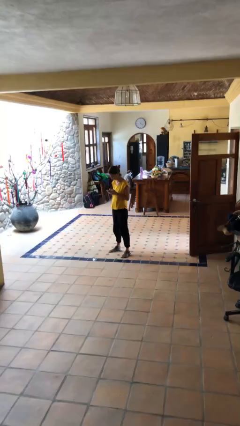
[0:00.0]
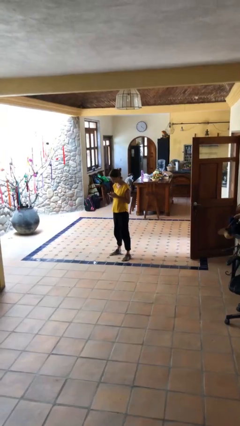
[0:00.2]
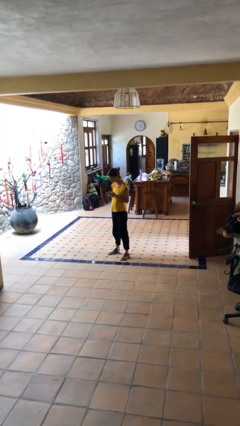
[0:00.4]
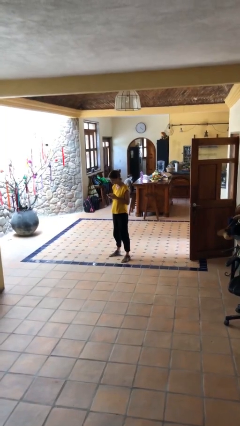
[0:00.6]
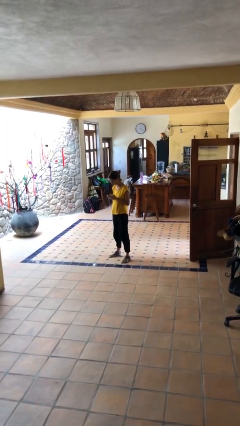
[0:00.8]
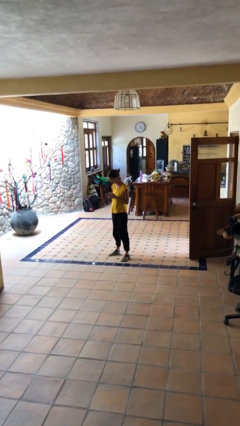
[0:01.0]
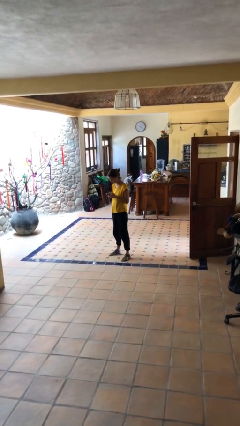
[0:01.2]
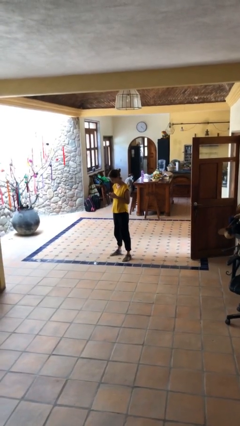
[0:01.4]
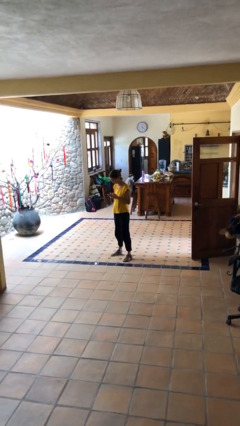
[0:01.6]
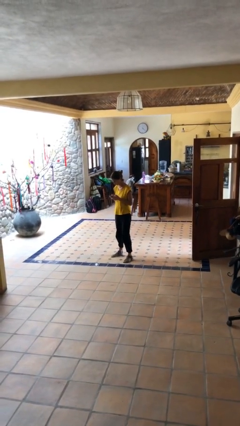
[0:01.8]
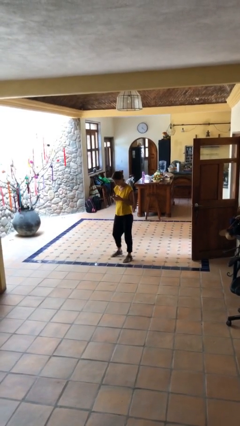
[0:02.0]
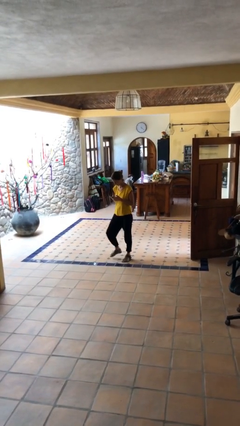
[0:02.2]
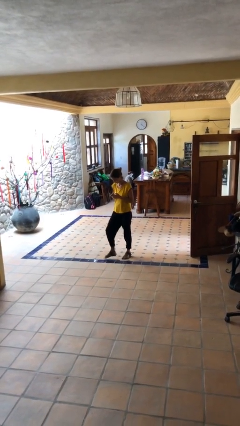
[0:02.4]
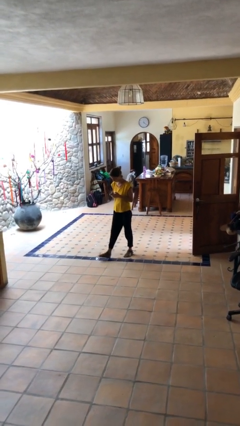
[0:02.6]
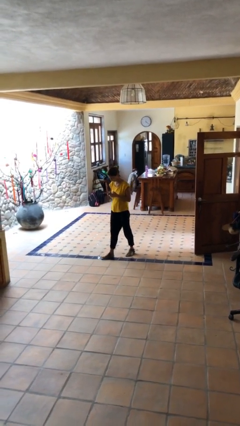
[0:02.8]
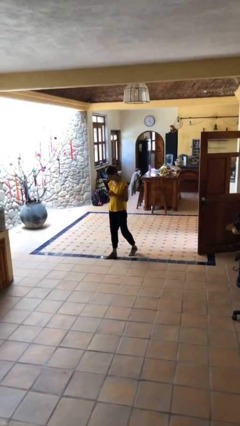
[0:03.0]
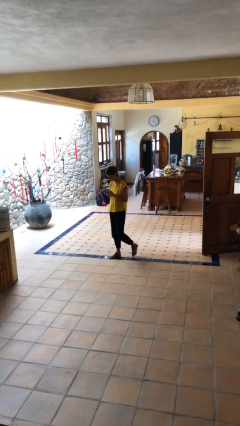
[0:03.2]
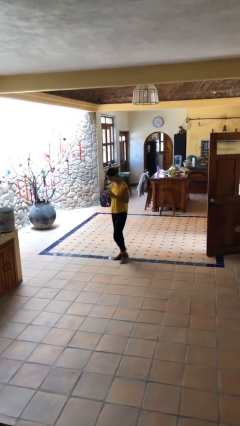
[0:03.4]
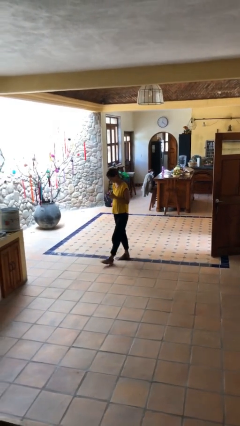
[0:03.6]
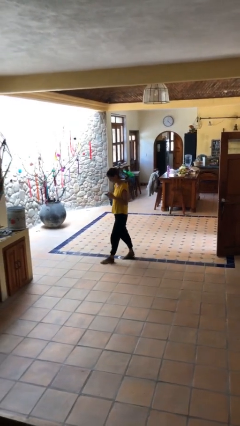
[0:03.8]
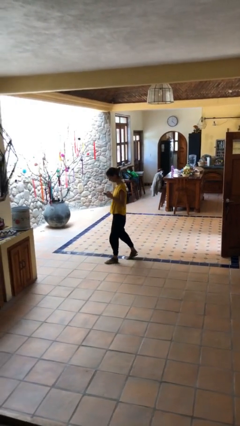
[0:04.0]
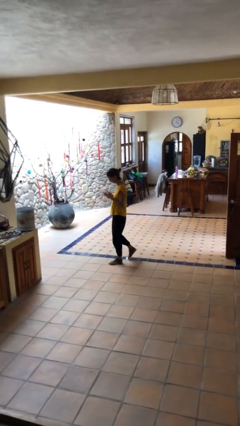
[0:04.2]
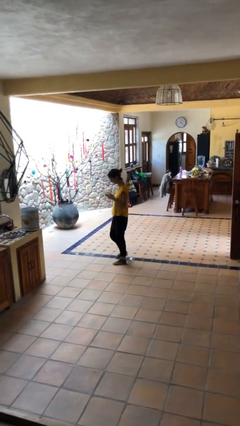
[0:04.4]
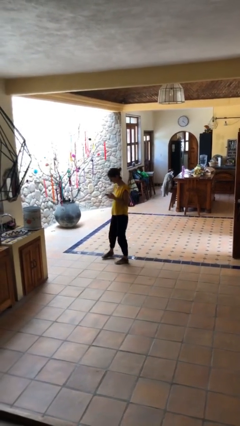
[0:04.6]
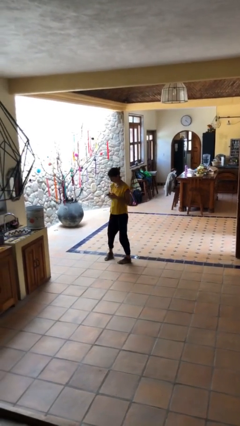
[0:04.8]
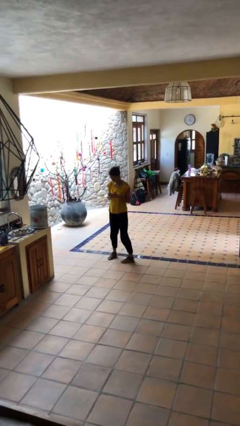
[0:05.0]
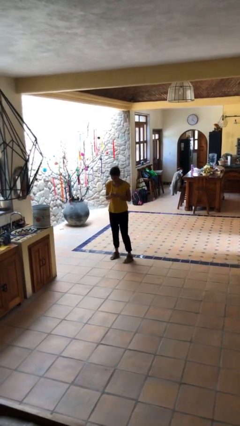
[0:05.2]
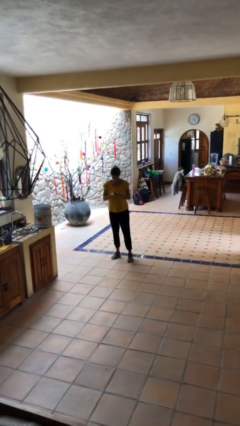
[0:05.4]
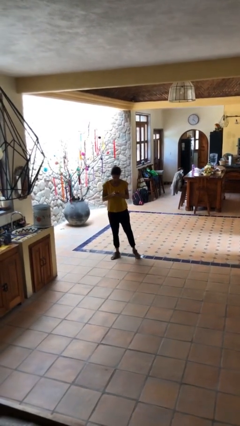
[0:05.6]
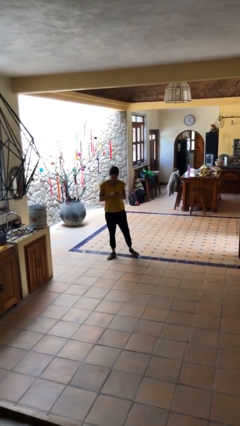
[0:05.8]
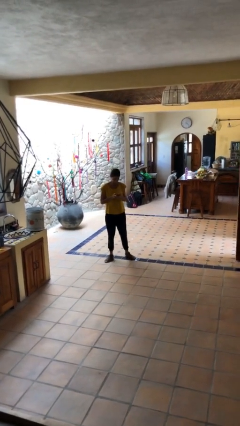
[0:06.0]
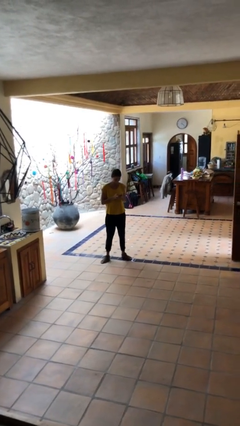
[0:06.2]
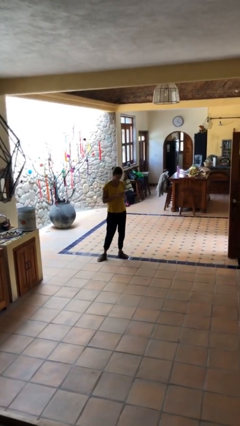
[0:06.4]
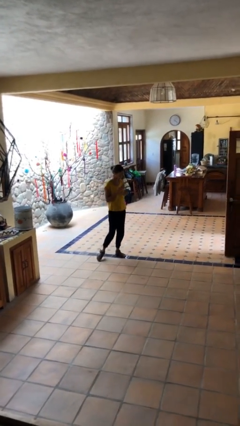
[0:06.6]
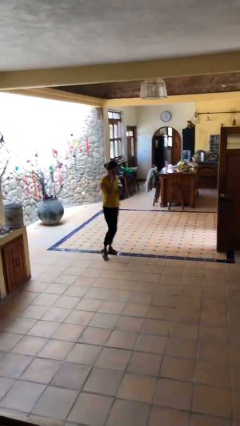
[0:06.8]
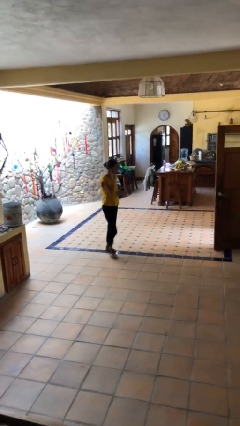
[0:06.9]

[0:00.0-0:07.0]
person texts on phone

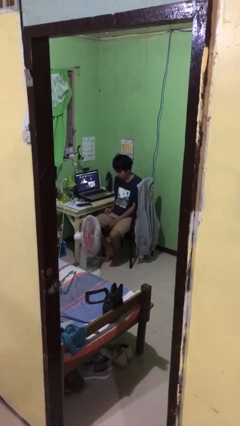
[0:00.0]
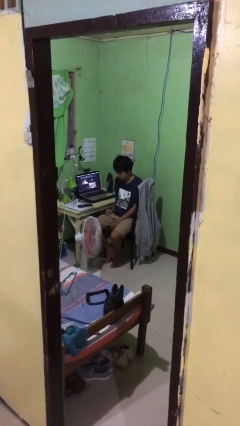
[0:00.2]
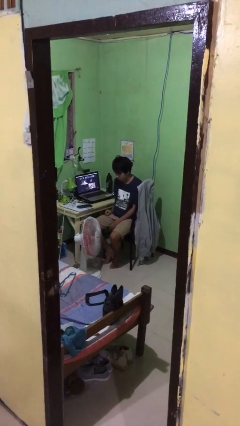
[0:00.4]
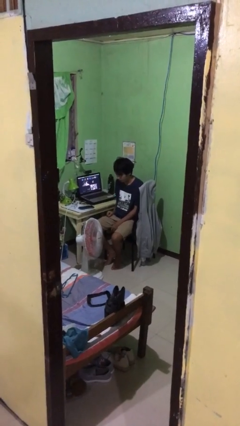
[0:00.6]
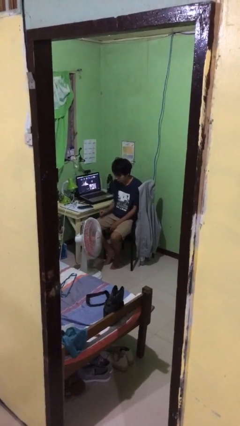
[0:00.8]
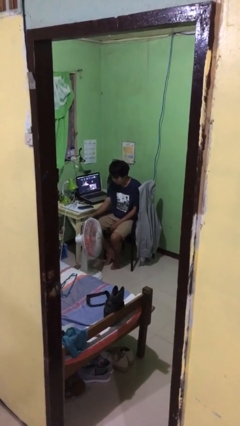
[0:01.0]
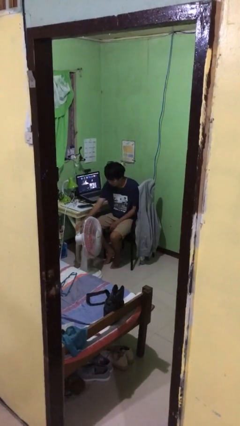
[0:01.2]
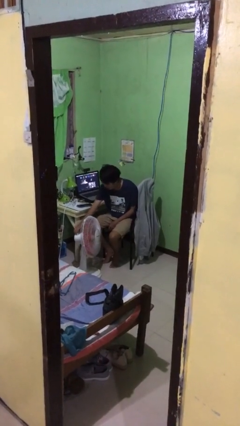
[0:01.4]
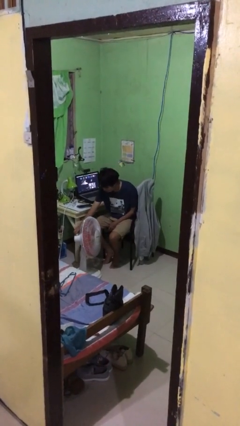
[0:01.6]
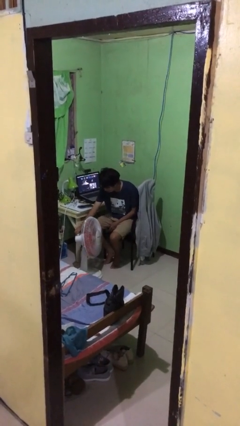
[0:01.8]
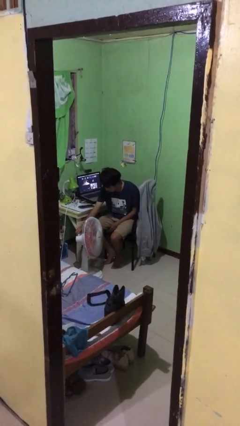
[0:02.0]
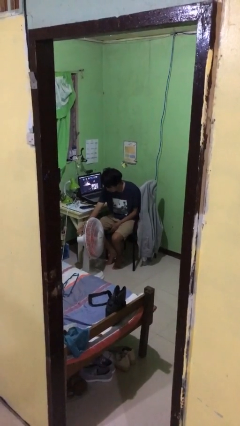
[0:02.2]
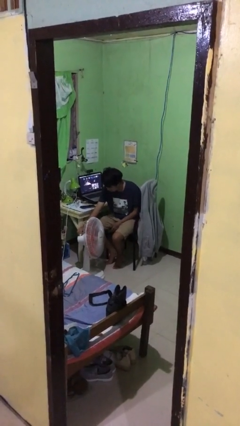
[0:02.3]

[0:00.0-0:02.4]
person turns on fan

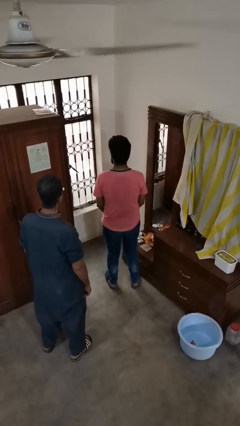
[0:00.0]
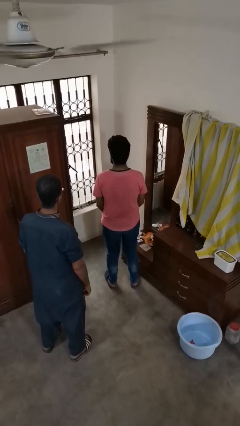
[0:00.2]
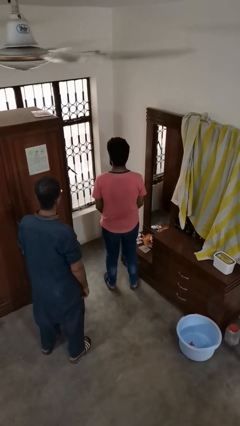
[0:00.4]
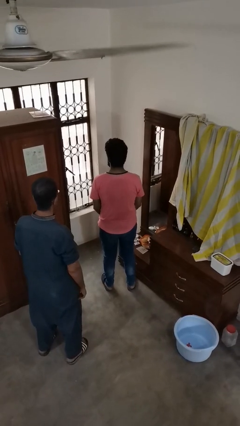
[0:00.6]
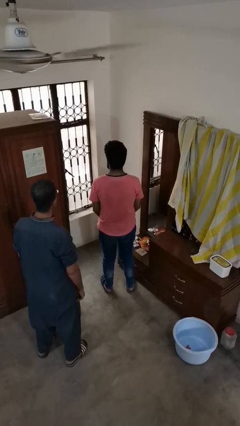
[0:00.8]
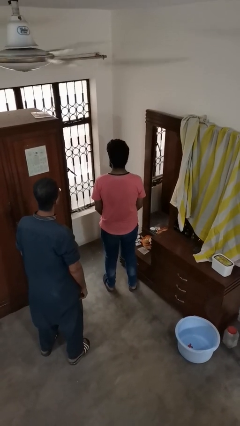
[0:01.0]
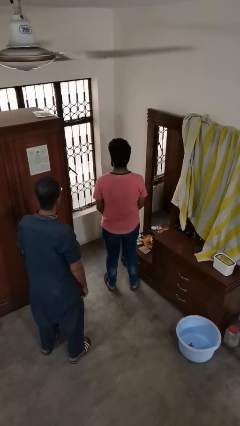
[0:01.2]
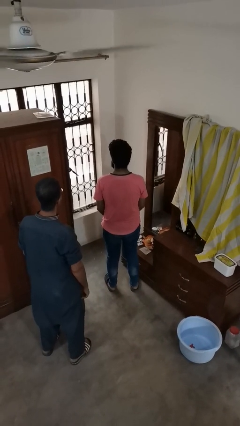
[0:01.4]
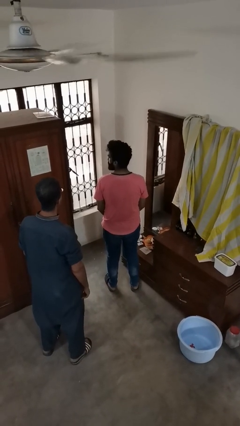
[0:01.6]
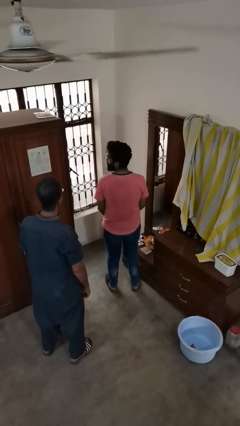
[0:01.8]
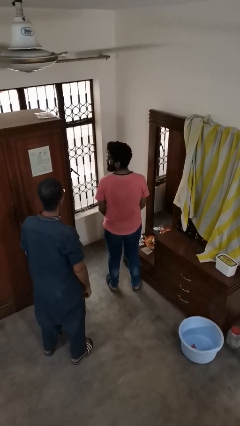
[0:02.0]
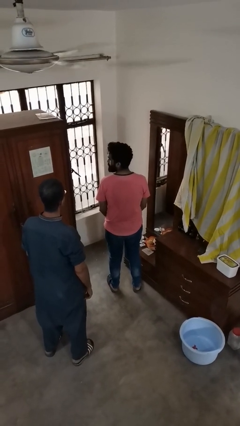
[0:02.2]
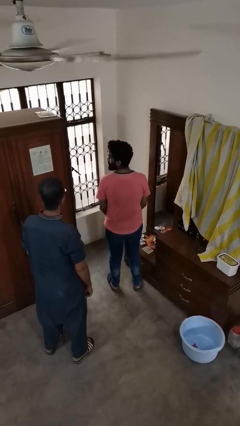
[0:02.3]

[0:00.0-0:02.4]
person looks over shoulder

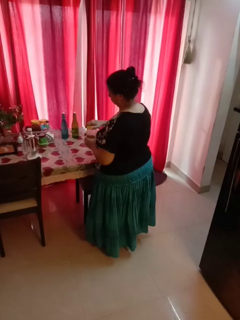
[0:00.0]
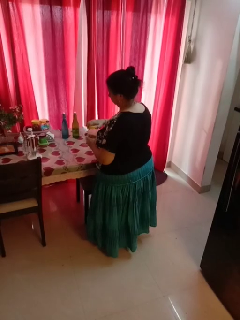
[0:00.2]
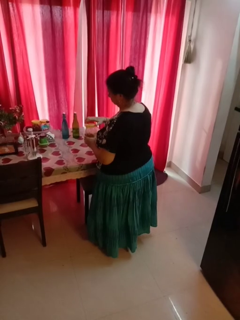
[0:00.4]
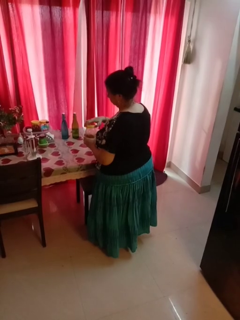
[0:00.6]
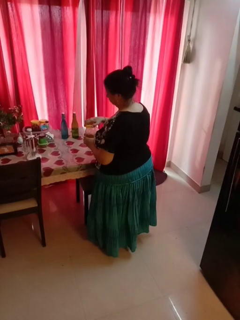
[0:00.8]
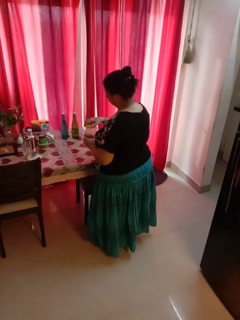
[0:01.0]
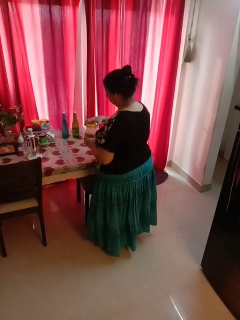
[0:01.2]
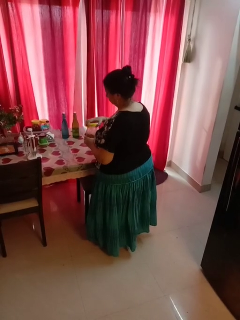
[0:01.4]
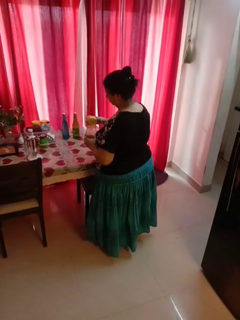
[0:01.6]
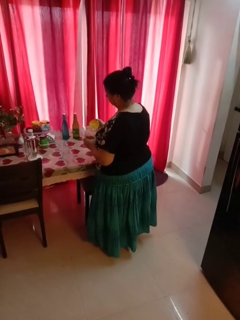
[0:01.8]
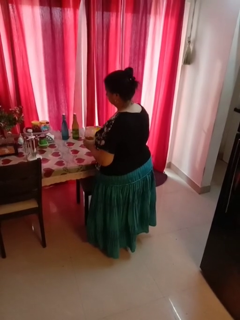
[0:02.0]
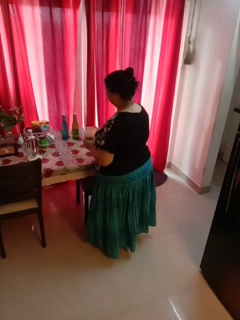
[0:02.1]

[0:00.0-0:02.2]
person opens jar

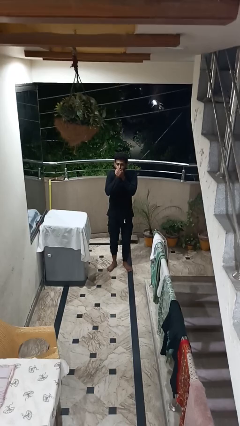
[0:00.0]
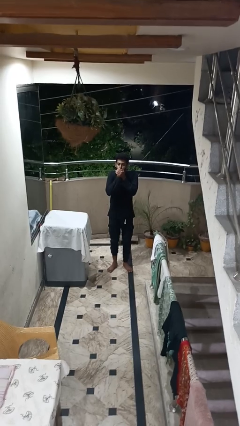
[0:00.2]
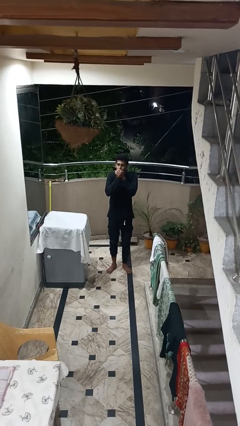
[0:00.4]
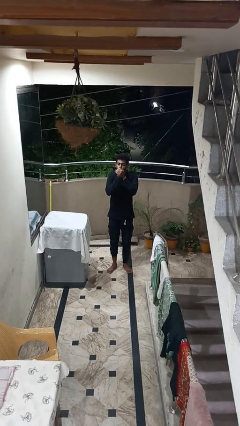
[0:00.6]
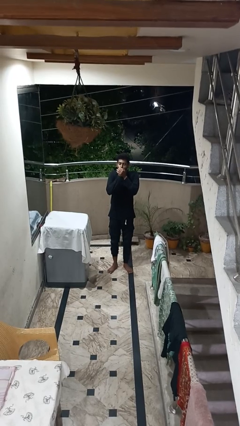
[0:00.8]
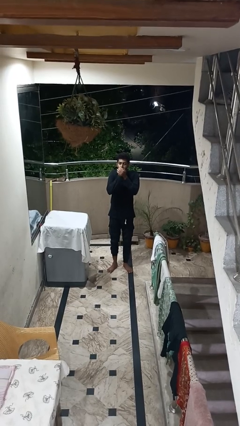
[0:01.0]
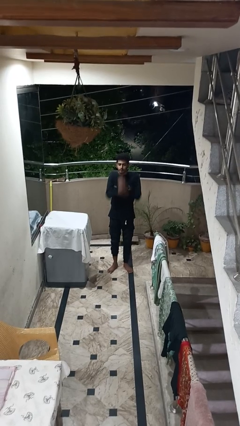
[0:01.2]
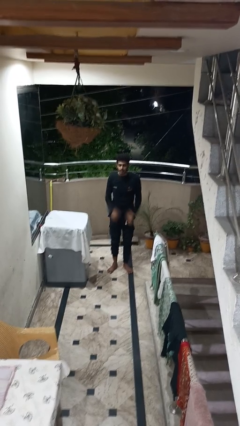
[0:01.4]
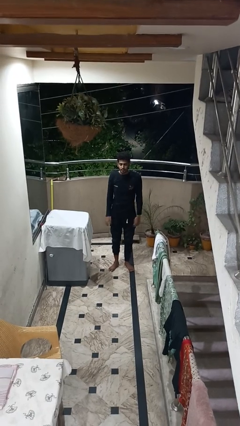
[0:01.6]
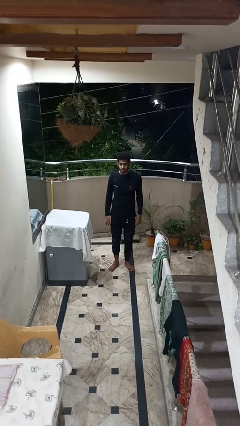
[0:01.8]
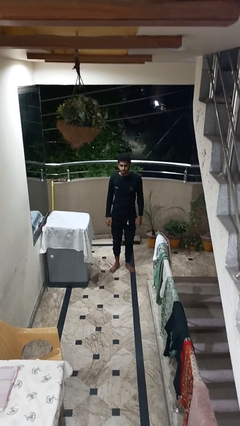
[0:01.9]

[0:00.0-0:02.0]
person blows into hands

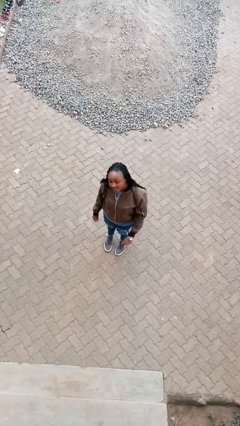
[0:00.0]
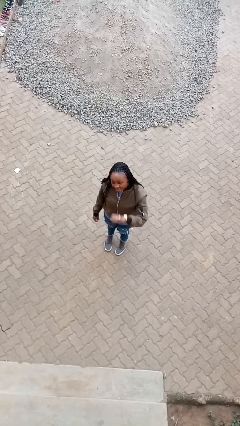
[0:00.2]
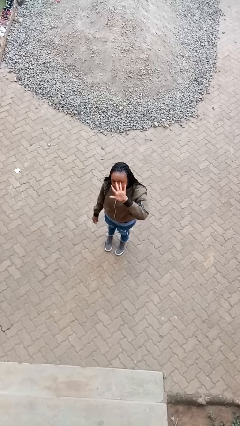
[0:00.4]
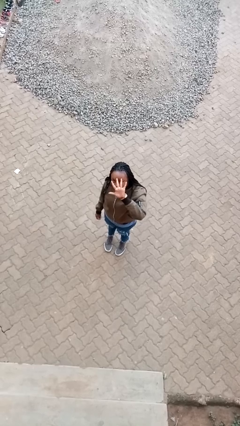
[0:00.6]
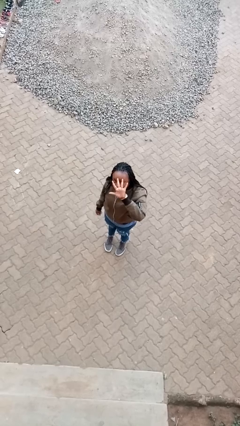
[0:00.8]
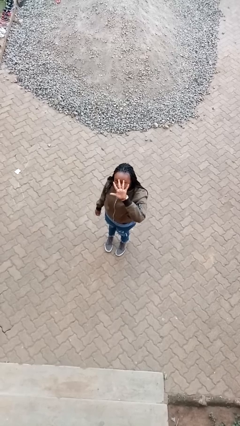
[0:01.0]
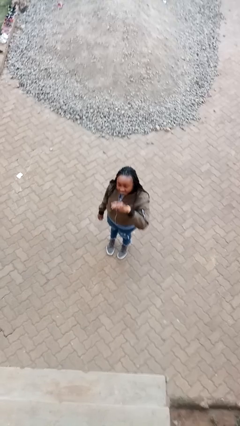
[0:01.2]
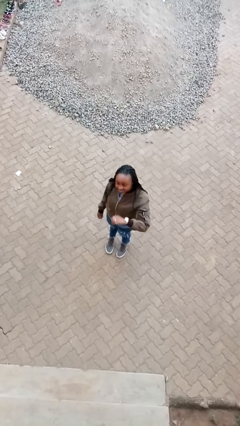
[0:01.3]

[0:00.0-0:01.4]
person gestures number five

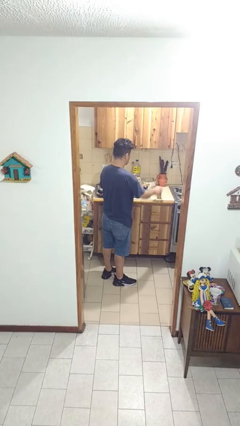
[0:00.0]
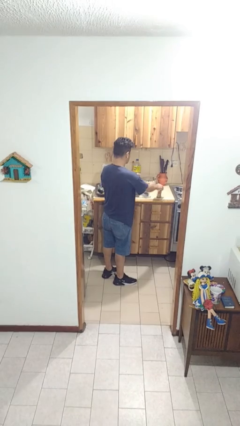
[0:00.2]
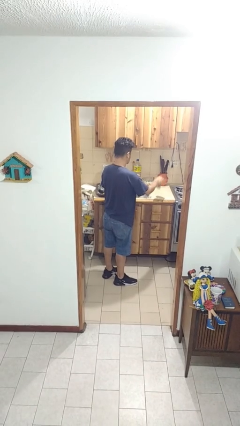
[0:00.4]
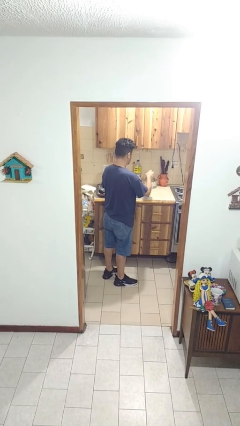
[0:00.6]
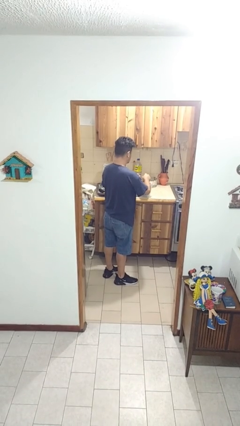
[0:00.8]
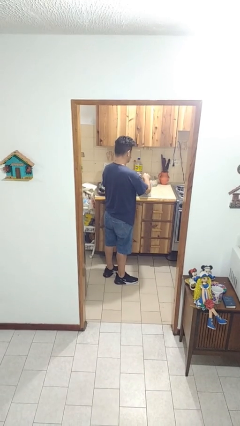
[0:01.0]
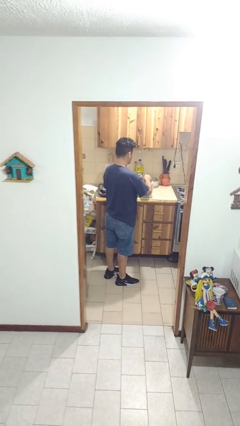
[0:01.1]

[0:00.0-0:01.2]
person puts object into bag
